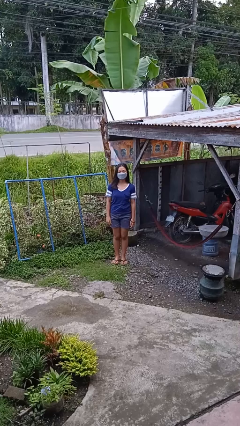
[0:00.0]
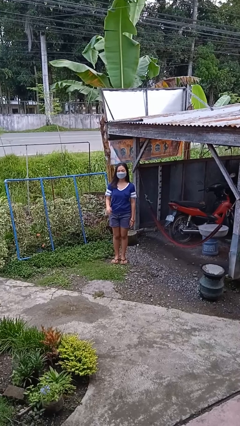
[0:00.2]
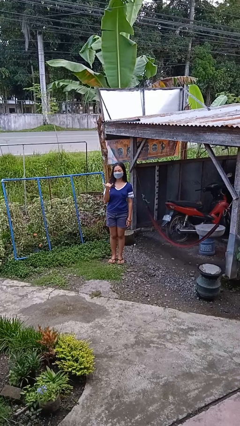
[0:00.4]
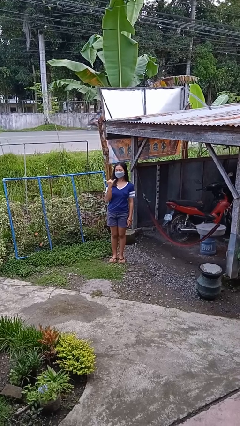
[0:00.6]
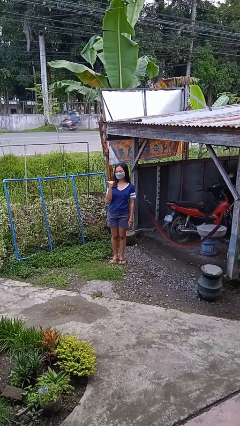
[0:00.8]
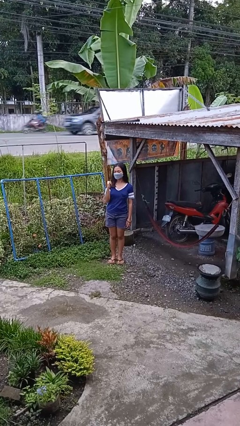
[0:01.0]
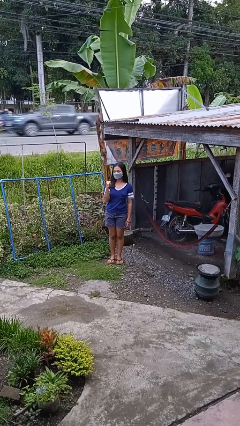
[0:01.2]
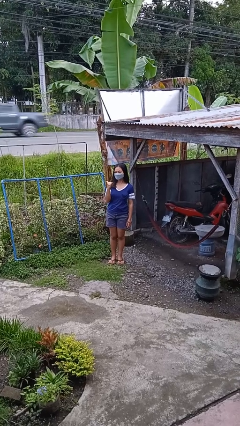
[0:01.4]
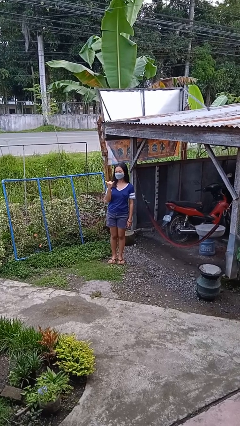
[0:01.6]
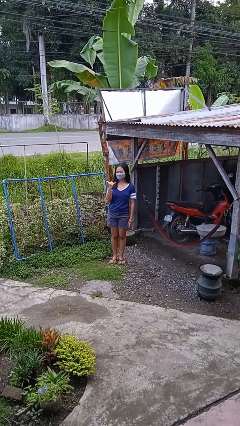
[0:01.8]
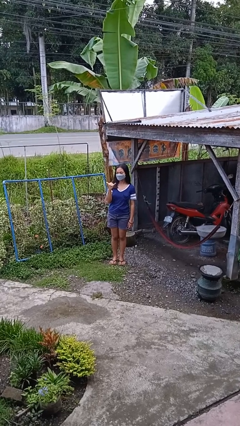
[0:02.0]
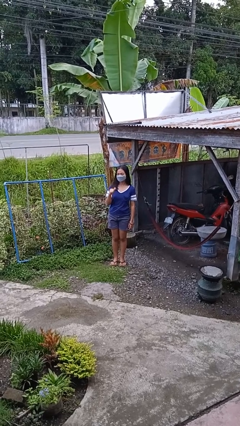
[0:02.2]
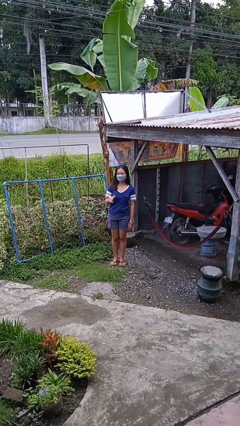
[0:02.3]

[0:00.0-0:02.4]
person gestures hang loose

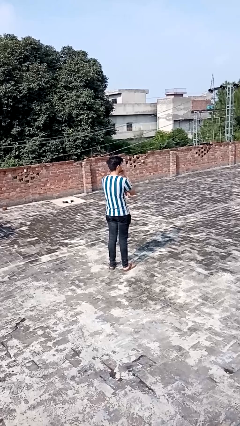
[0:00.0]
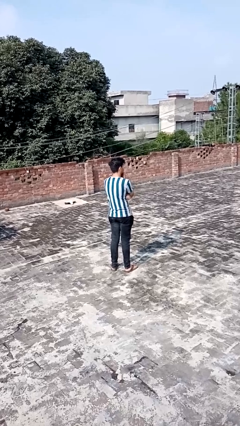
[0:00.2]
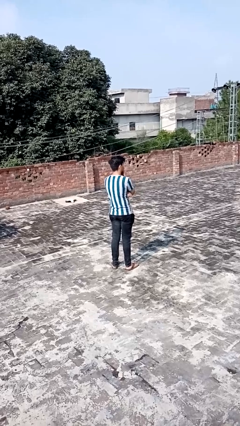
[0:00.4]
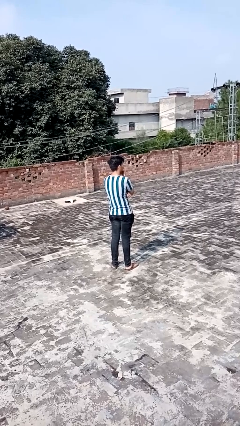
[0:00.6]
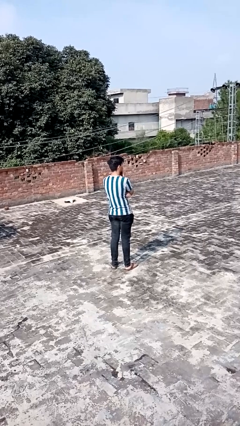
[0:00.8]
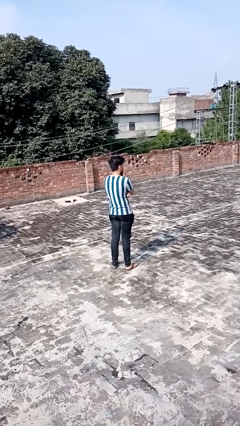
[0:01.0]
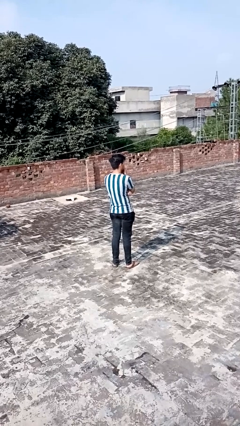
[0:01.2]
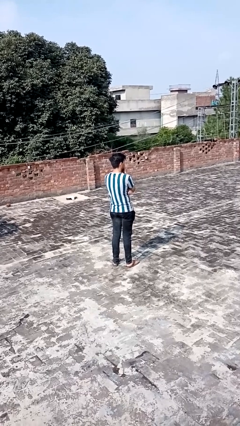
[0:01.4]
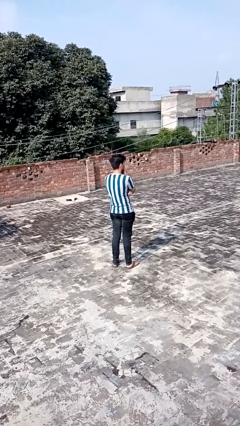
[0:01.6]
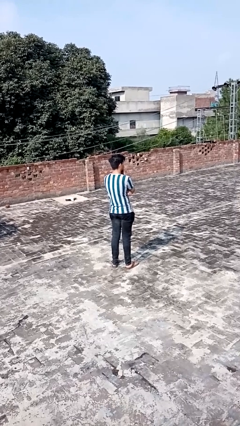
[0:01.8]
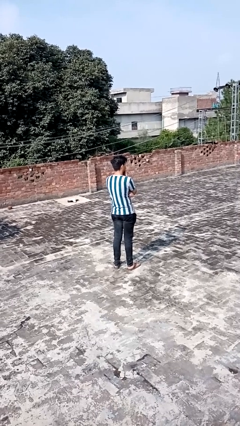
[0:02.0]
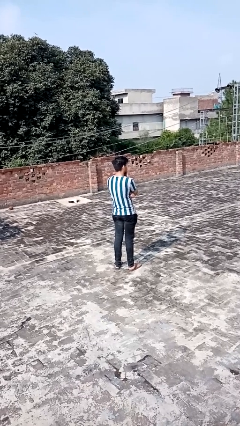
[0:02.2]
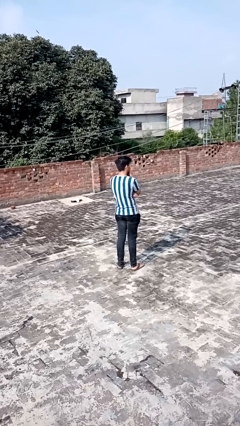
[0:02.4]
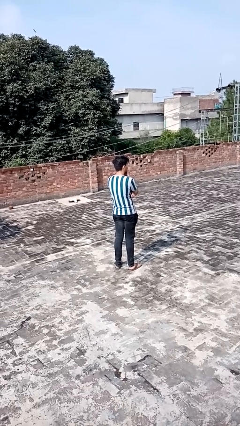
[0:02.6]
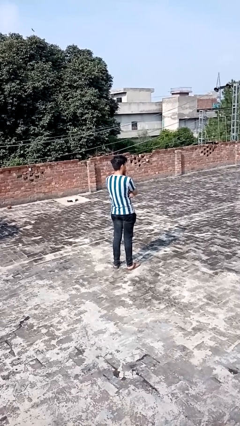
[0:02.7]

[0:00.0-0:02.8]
person strokes chin

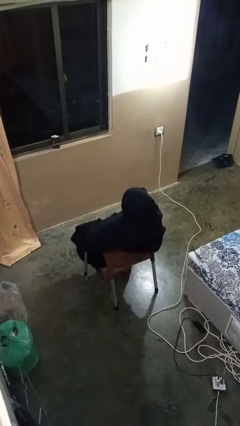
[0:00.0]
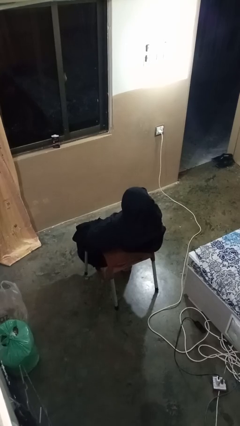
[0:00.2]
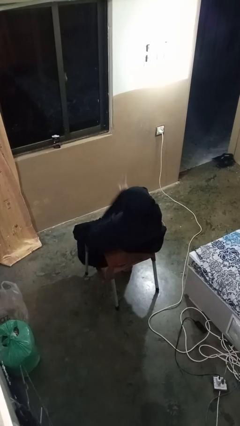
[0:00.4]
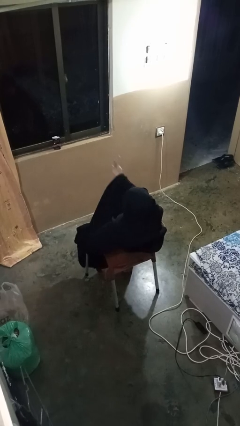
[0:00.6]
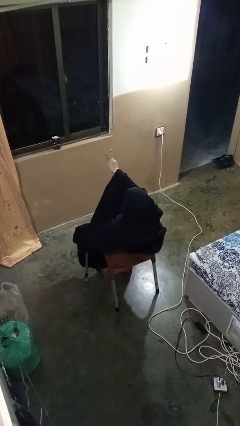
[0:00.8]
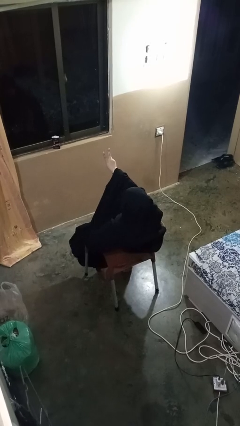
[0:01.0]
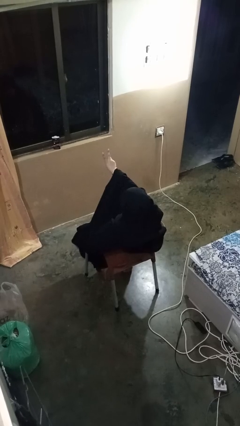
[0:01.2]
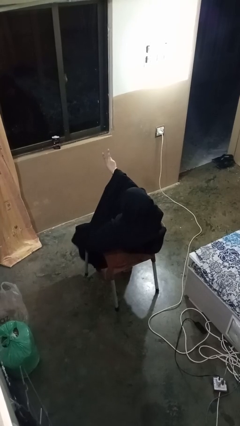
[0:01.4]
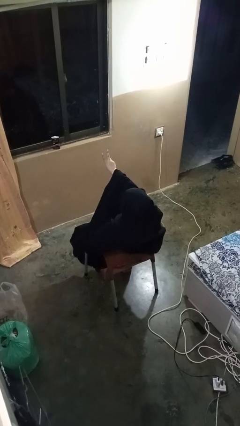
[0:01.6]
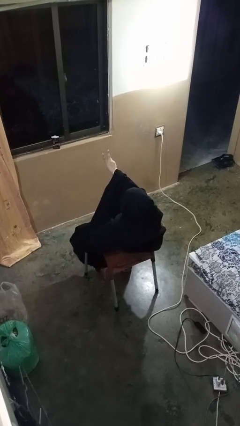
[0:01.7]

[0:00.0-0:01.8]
person gestures peace

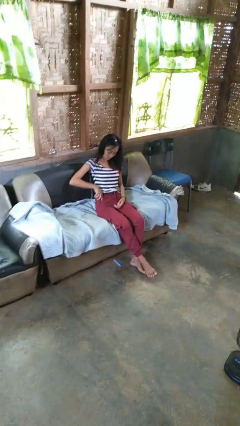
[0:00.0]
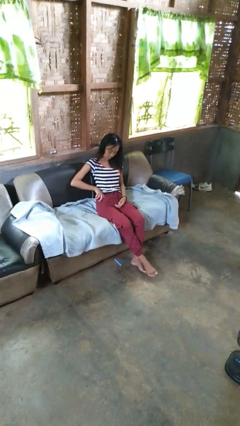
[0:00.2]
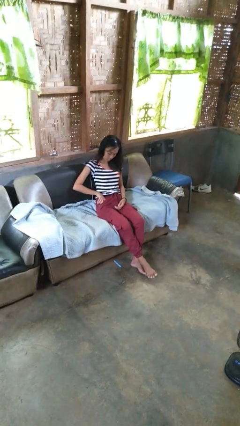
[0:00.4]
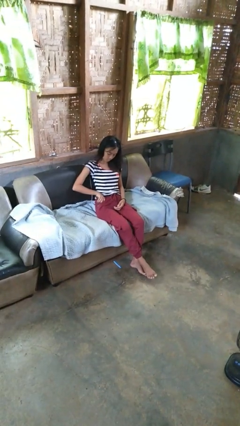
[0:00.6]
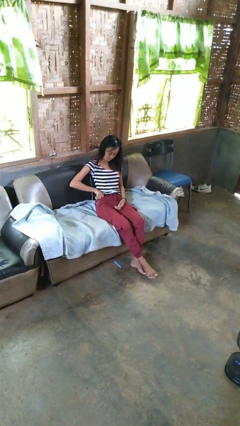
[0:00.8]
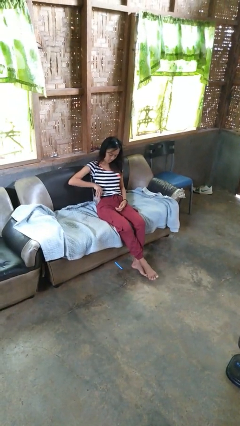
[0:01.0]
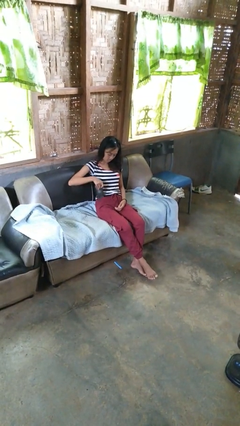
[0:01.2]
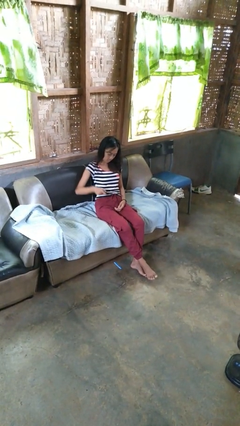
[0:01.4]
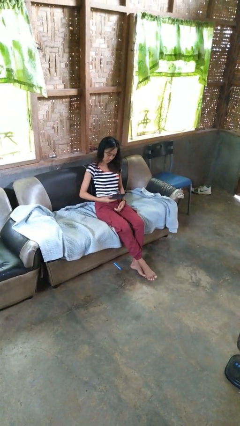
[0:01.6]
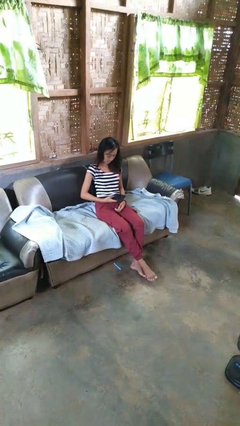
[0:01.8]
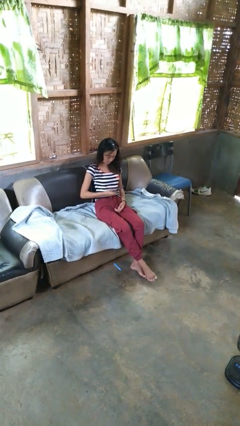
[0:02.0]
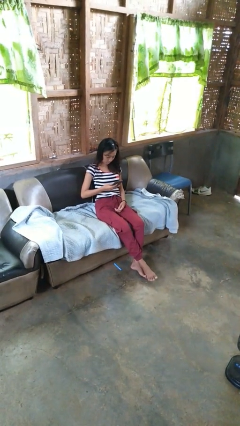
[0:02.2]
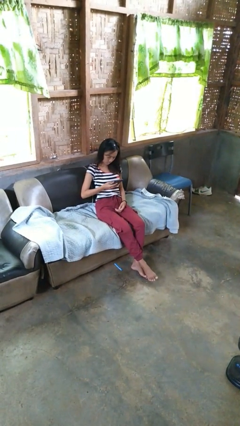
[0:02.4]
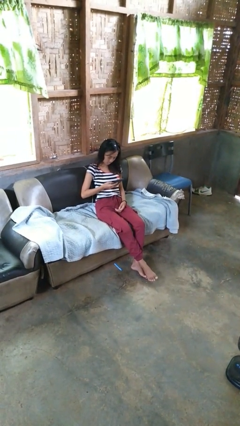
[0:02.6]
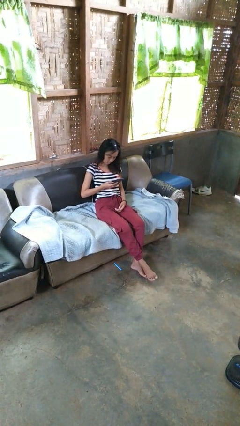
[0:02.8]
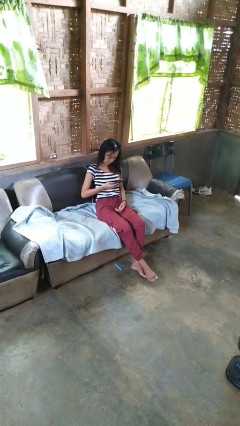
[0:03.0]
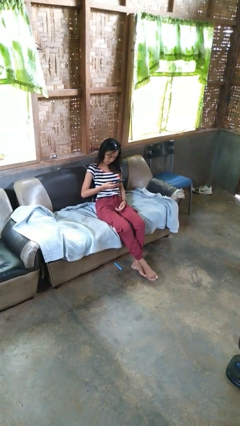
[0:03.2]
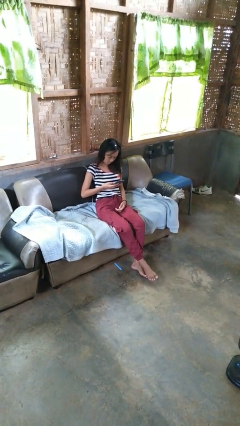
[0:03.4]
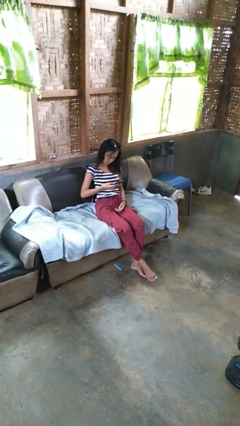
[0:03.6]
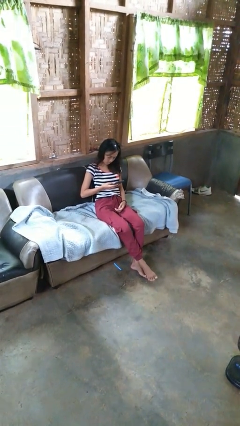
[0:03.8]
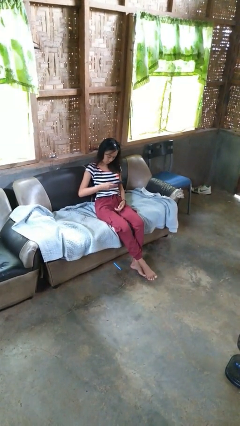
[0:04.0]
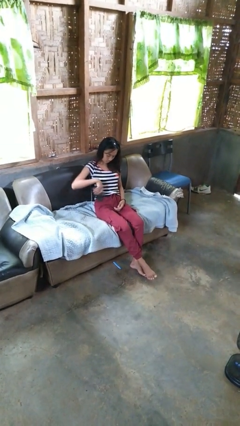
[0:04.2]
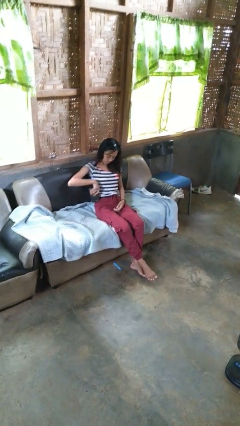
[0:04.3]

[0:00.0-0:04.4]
person takes phone from pocket

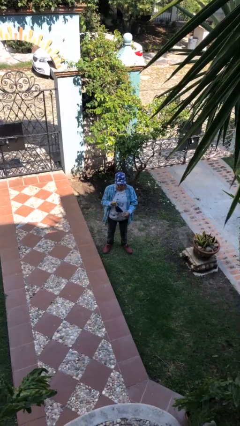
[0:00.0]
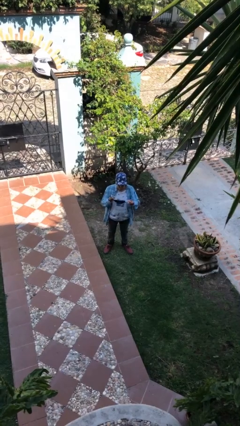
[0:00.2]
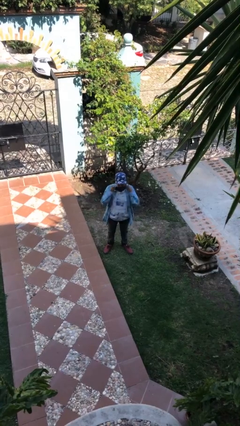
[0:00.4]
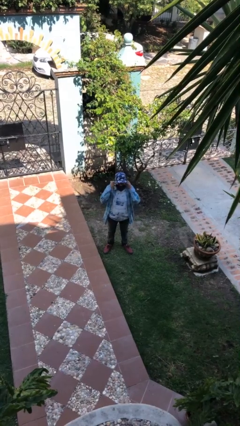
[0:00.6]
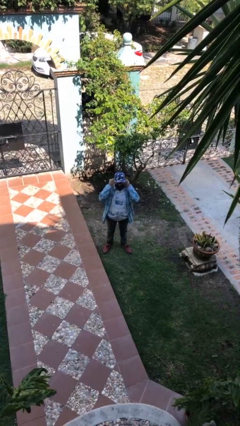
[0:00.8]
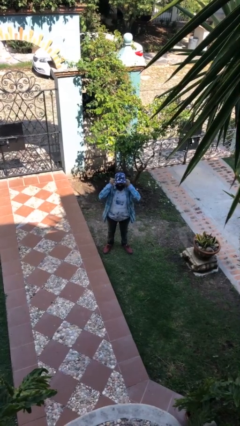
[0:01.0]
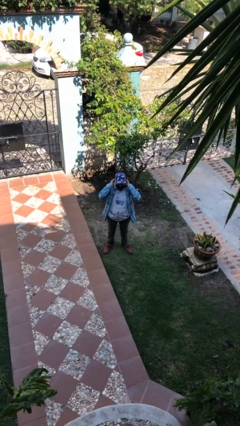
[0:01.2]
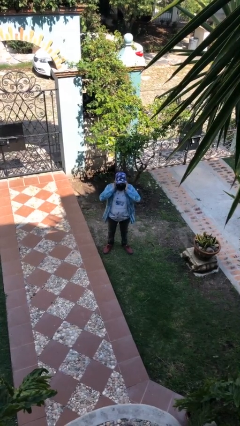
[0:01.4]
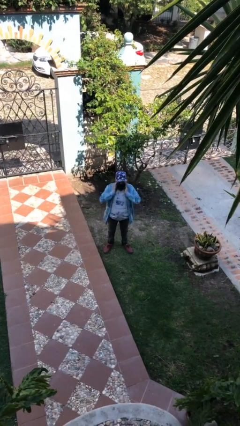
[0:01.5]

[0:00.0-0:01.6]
person puts on facemask

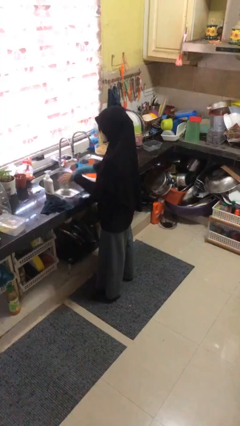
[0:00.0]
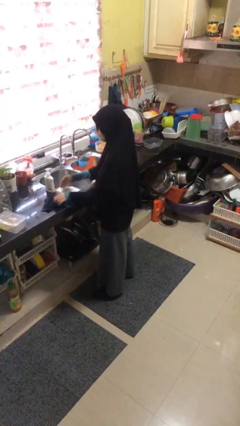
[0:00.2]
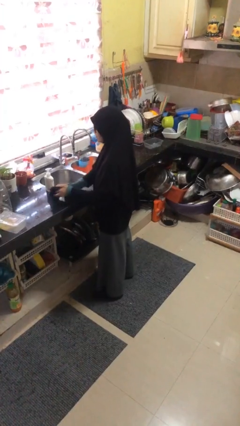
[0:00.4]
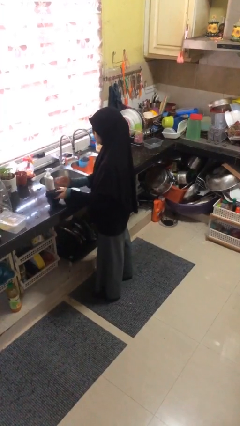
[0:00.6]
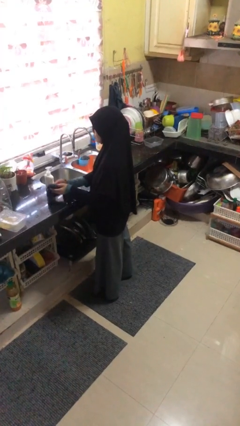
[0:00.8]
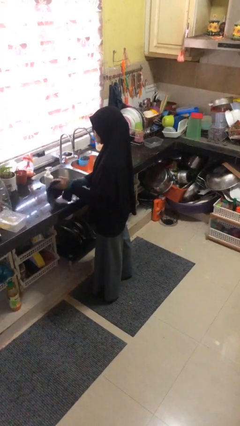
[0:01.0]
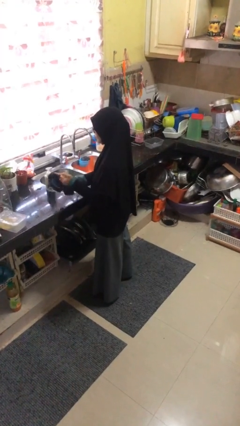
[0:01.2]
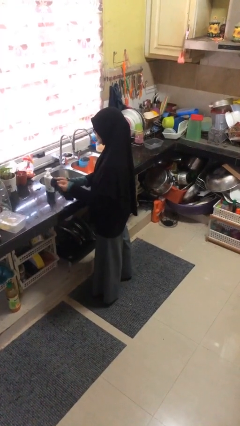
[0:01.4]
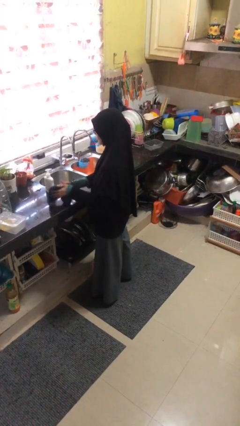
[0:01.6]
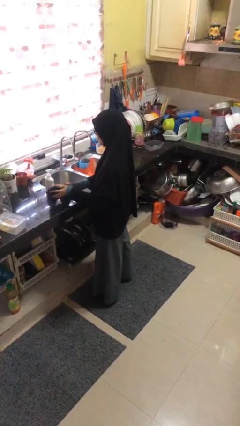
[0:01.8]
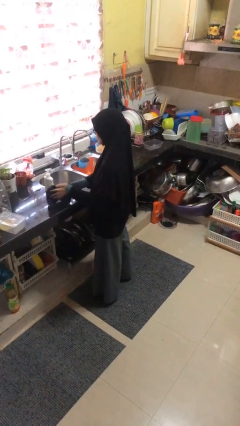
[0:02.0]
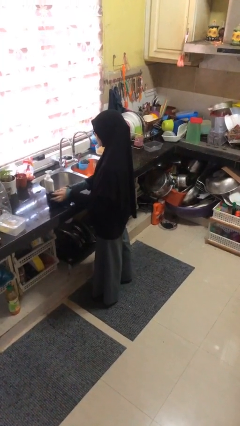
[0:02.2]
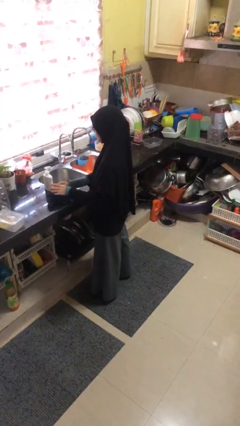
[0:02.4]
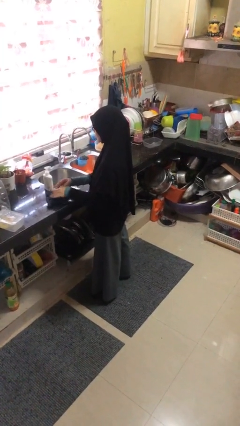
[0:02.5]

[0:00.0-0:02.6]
person dries hands with towel

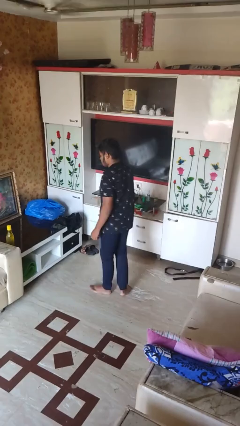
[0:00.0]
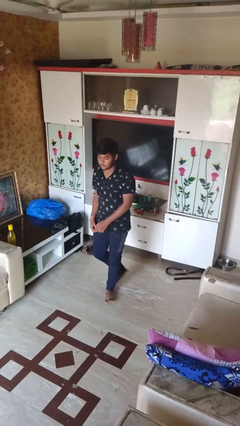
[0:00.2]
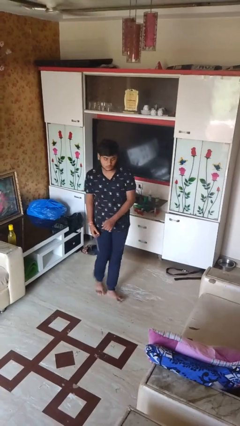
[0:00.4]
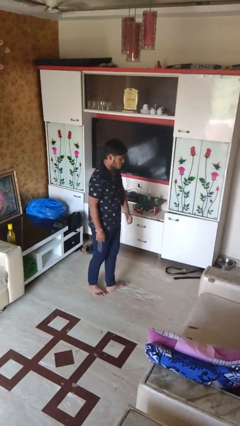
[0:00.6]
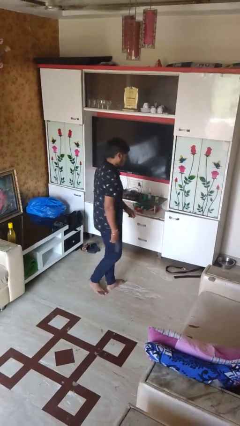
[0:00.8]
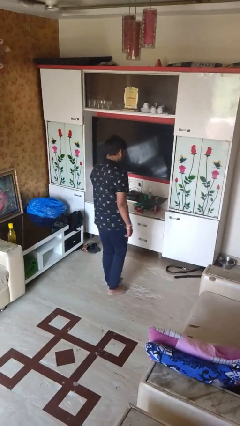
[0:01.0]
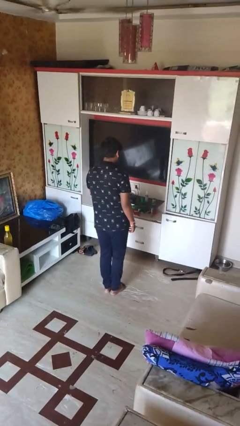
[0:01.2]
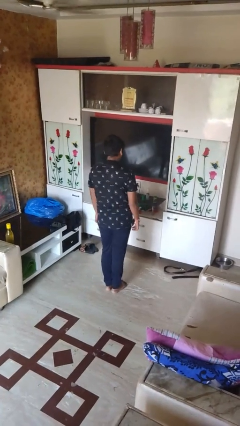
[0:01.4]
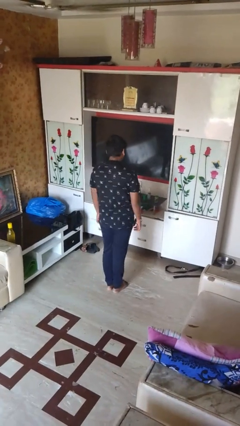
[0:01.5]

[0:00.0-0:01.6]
person twirls
